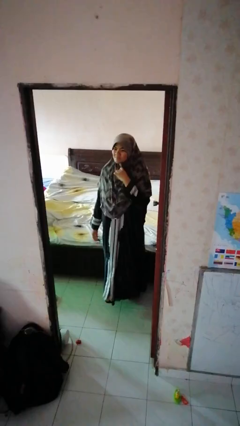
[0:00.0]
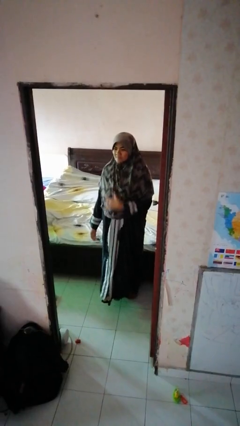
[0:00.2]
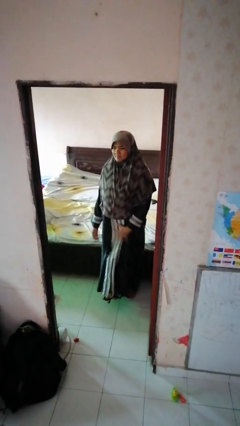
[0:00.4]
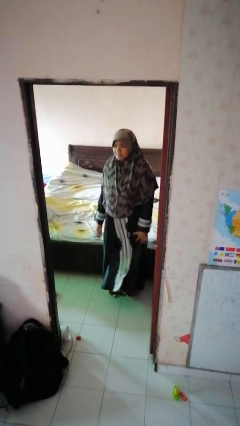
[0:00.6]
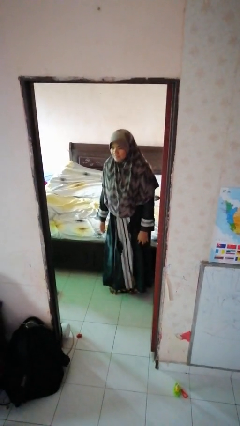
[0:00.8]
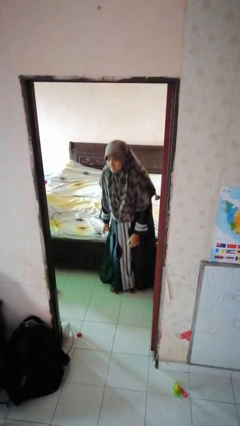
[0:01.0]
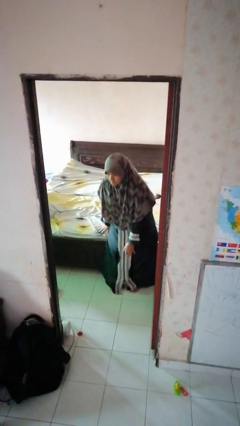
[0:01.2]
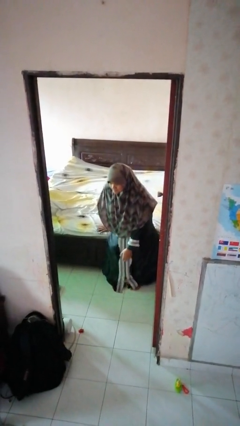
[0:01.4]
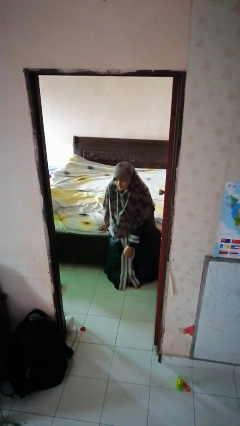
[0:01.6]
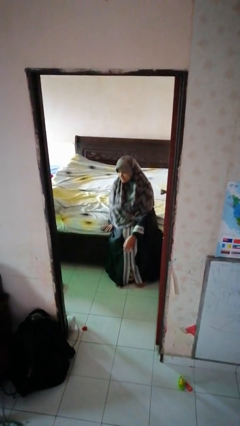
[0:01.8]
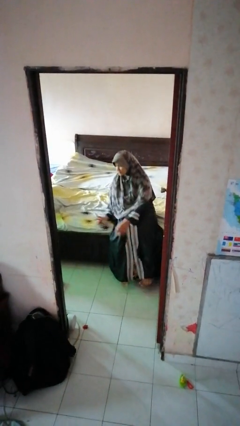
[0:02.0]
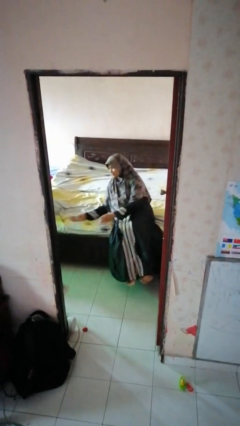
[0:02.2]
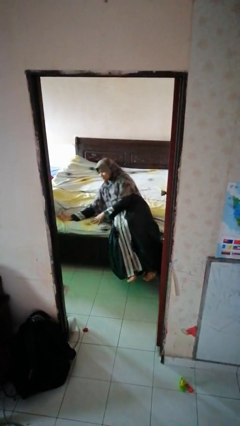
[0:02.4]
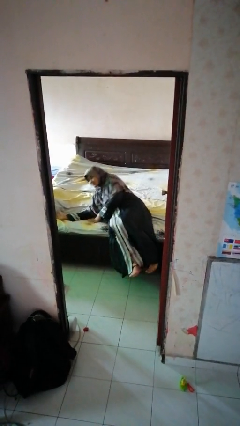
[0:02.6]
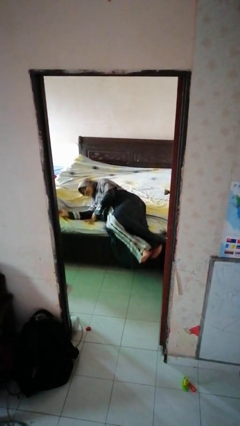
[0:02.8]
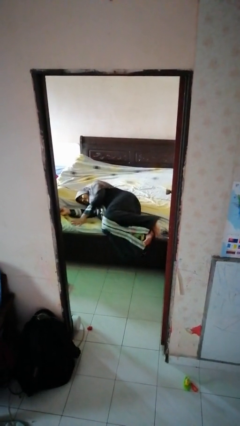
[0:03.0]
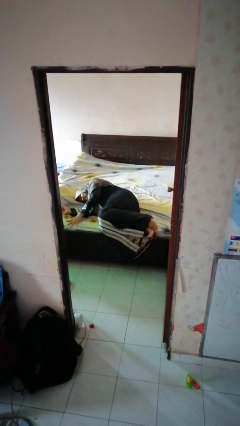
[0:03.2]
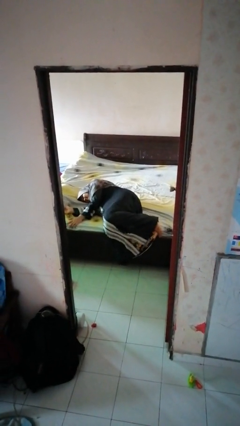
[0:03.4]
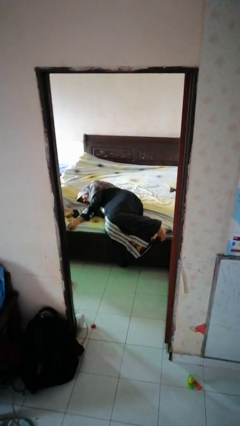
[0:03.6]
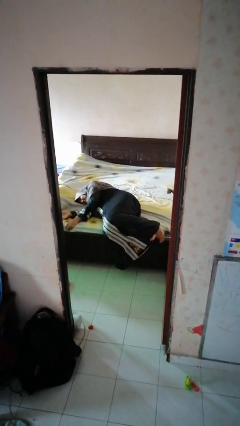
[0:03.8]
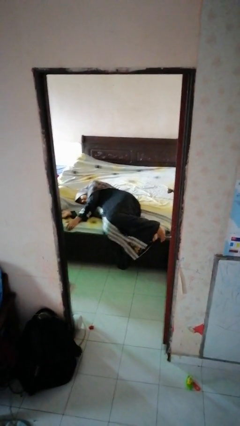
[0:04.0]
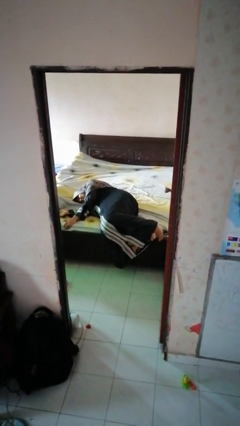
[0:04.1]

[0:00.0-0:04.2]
person lies down on bed

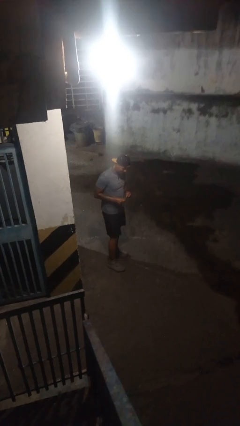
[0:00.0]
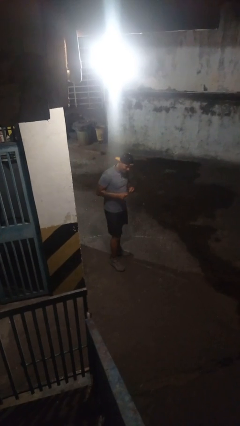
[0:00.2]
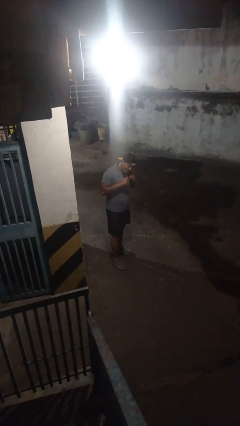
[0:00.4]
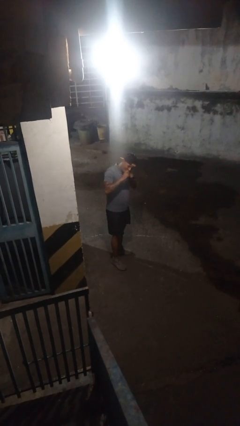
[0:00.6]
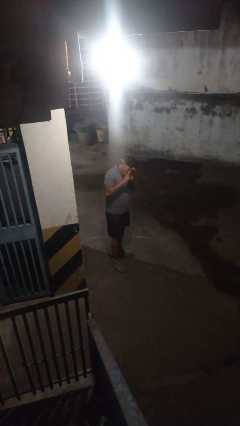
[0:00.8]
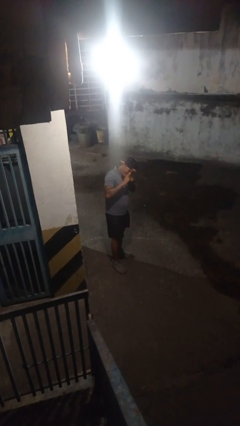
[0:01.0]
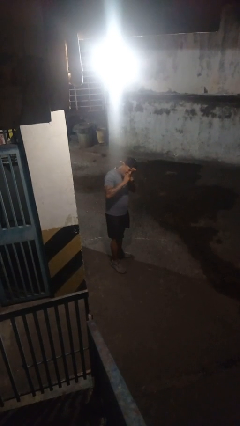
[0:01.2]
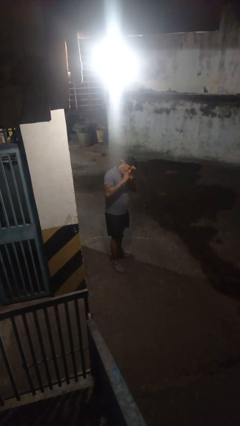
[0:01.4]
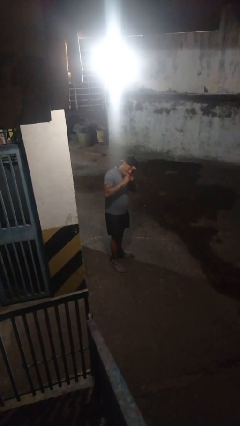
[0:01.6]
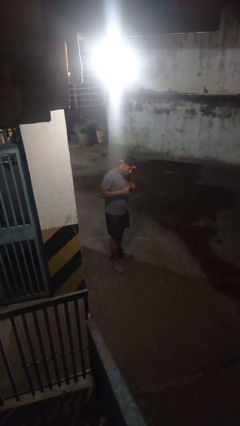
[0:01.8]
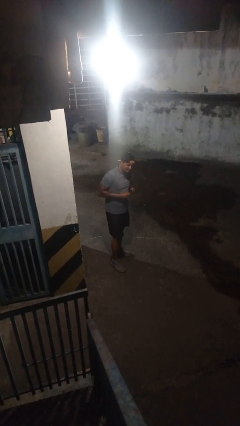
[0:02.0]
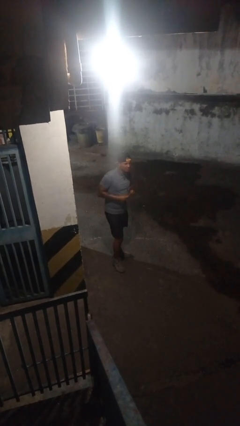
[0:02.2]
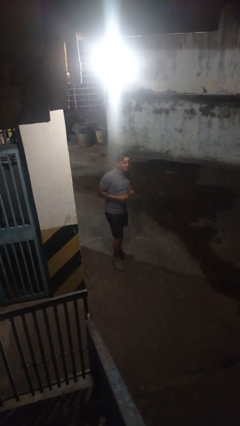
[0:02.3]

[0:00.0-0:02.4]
person flosses

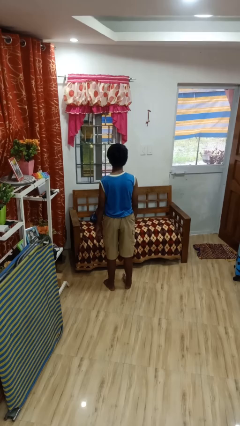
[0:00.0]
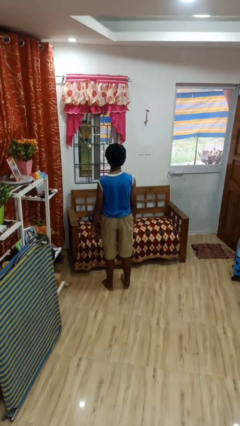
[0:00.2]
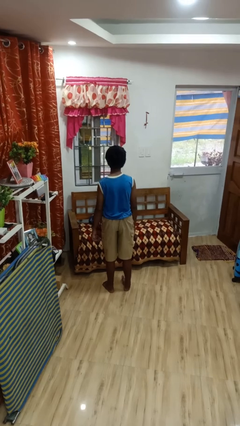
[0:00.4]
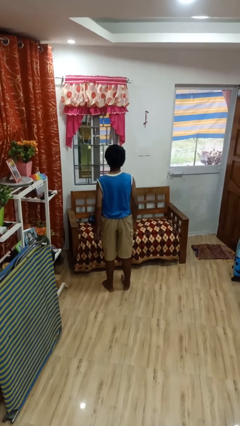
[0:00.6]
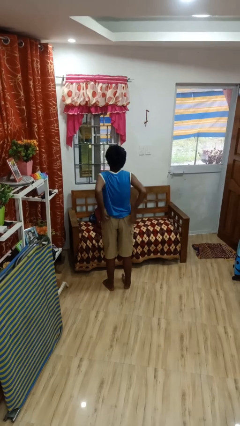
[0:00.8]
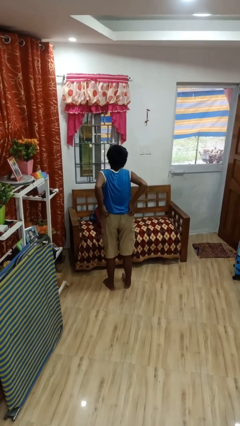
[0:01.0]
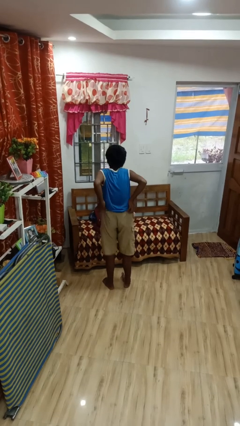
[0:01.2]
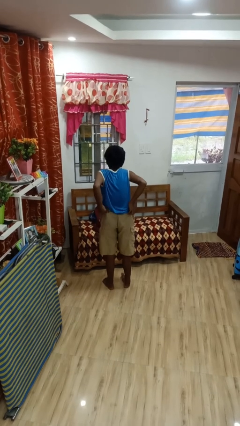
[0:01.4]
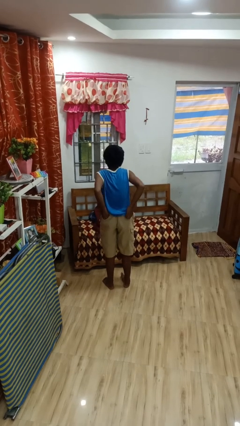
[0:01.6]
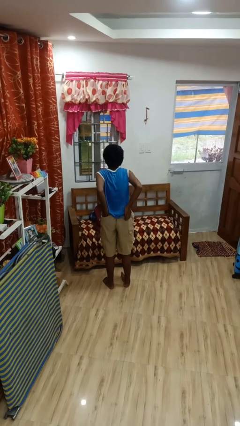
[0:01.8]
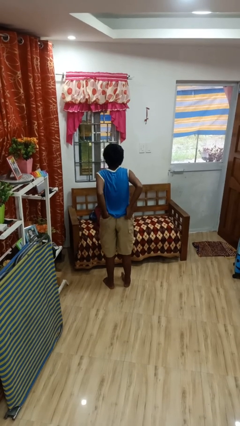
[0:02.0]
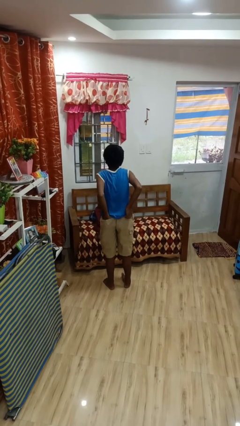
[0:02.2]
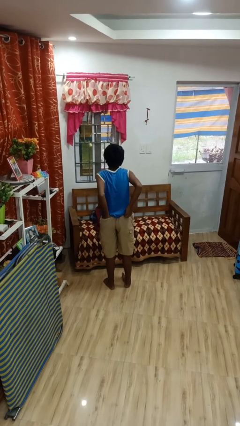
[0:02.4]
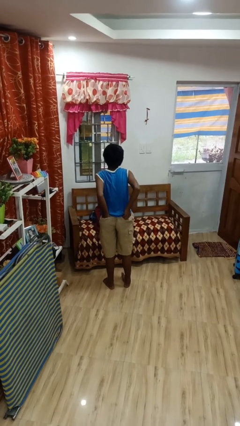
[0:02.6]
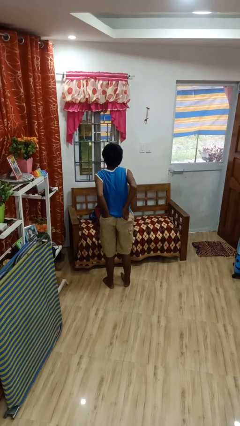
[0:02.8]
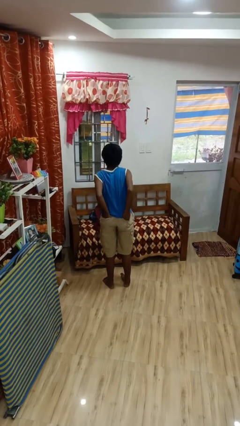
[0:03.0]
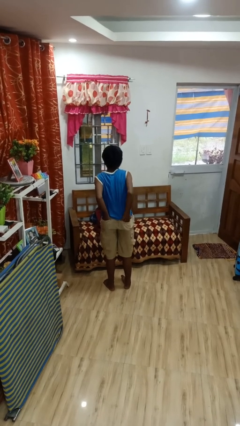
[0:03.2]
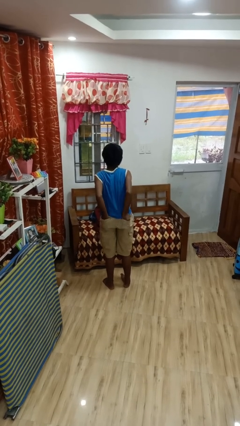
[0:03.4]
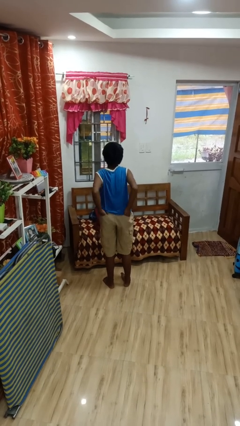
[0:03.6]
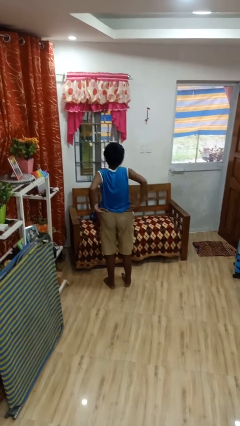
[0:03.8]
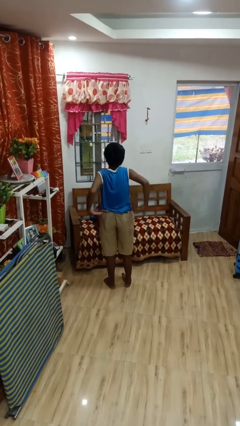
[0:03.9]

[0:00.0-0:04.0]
person puts hands in back pockets

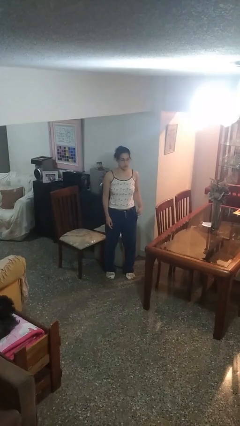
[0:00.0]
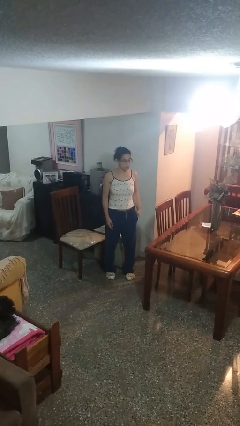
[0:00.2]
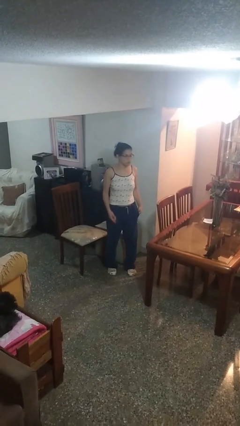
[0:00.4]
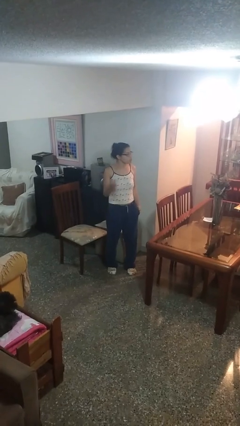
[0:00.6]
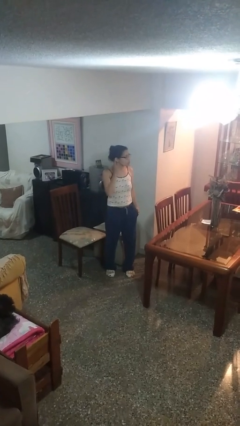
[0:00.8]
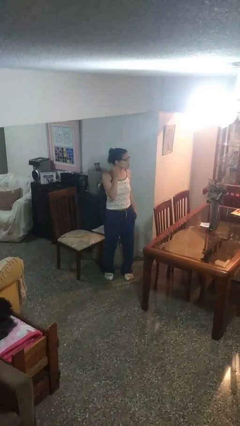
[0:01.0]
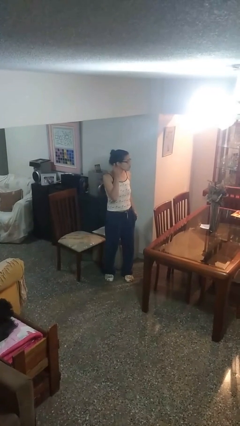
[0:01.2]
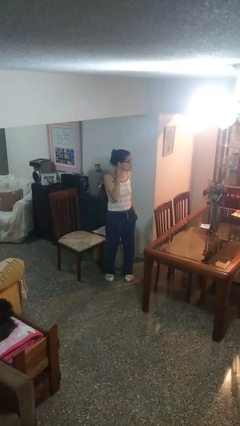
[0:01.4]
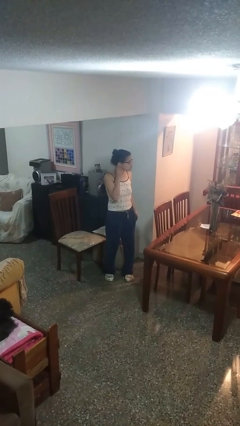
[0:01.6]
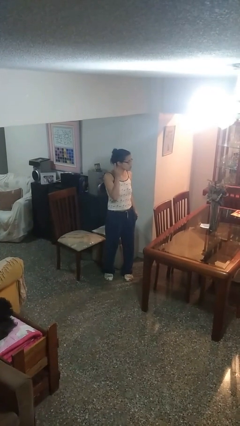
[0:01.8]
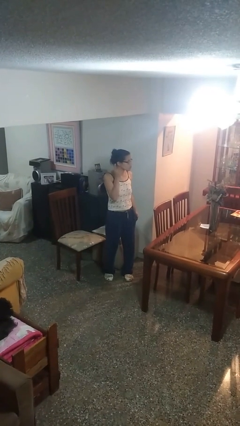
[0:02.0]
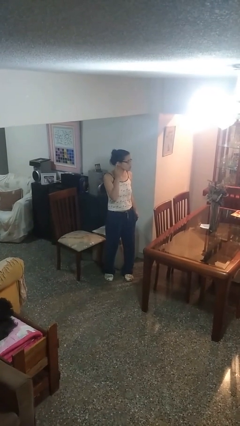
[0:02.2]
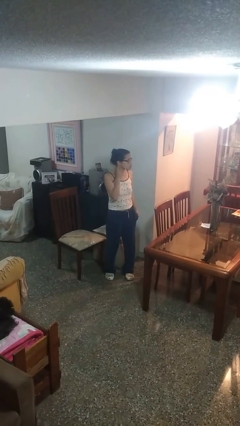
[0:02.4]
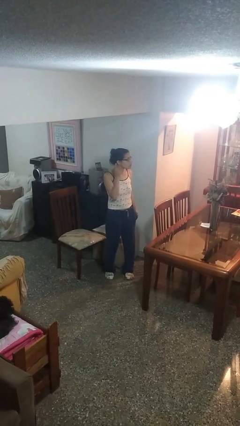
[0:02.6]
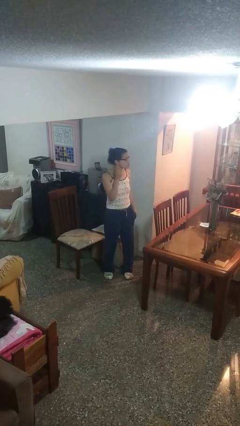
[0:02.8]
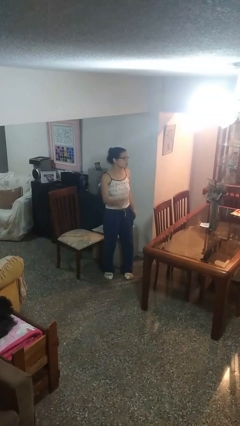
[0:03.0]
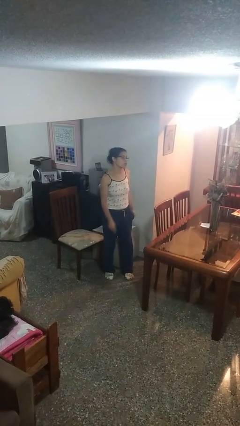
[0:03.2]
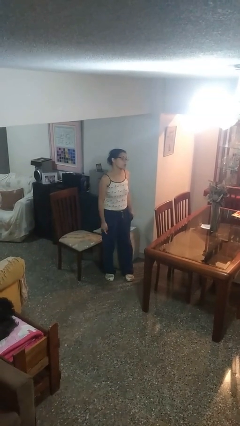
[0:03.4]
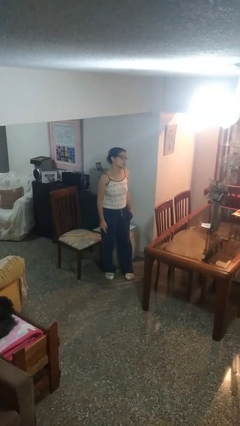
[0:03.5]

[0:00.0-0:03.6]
person gestures listen closely

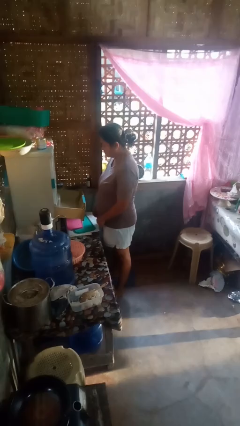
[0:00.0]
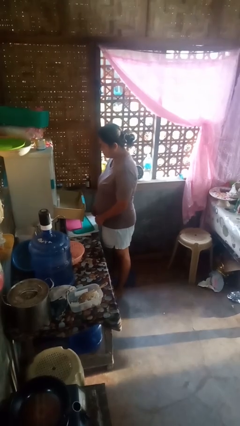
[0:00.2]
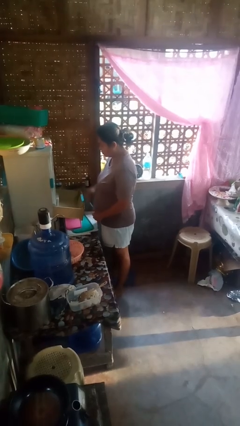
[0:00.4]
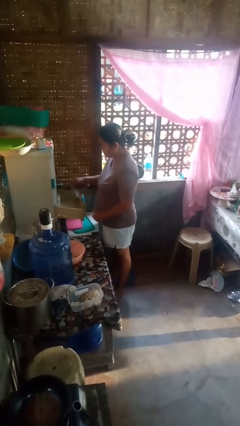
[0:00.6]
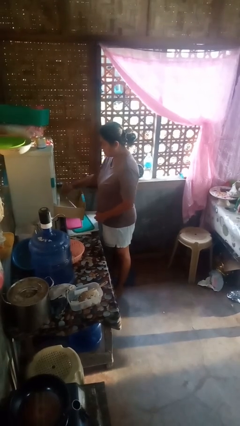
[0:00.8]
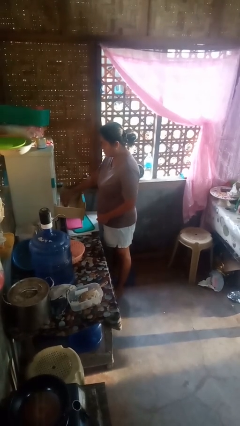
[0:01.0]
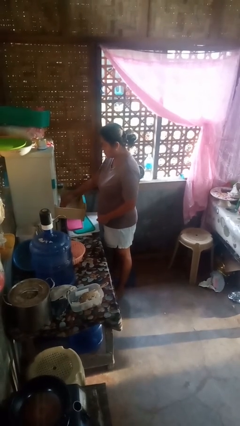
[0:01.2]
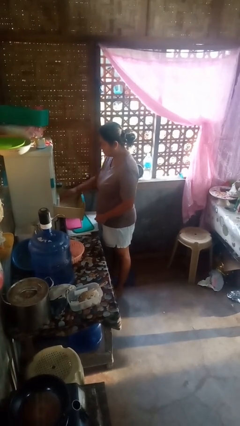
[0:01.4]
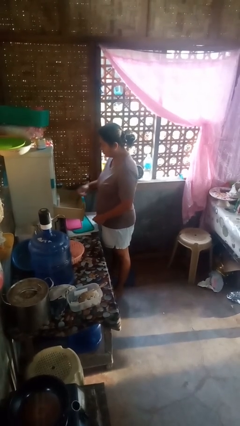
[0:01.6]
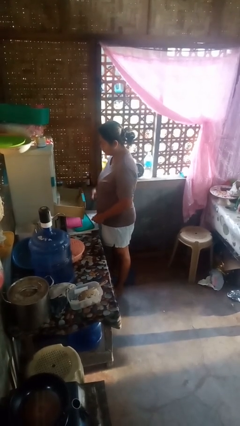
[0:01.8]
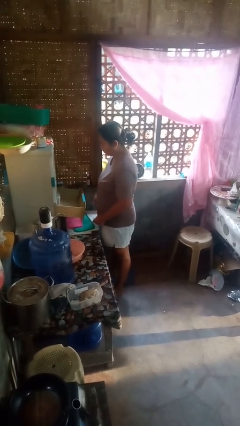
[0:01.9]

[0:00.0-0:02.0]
person puts object into kitchen drawer

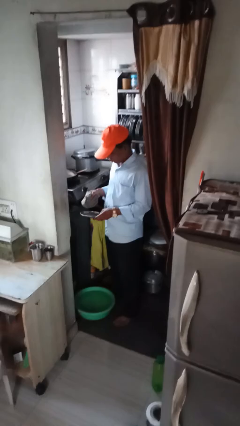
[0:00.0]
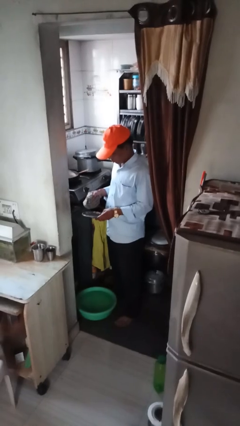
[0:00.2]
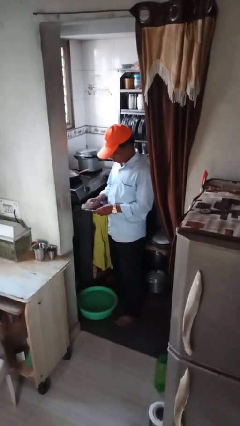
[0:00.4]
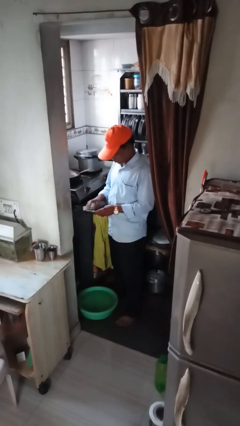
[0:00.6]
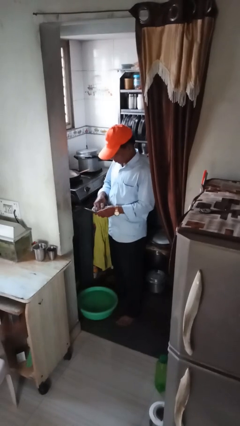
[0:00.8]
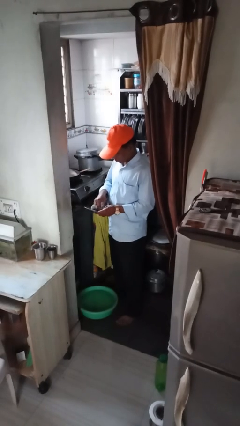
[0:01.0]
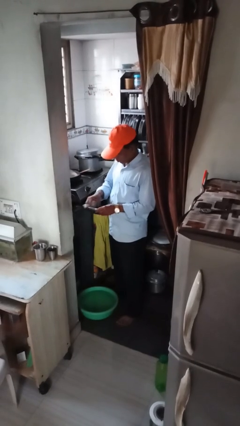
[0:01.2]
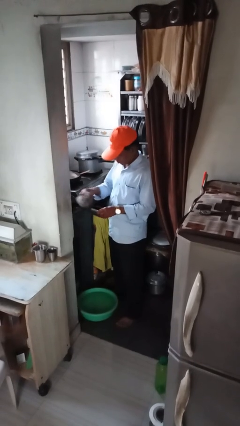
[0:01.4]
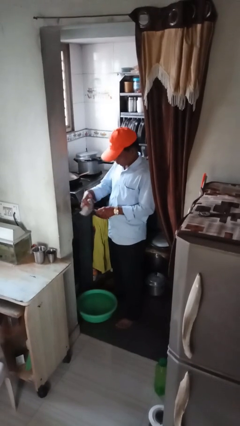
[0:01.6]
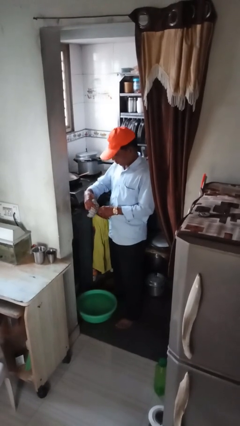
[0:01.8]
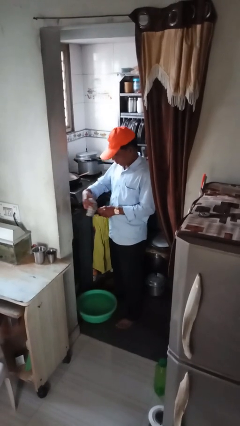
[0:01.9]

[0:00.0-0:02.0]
person dries dish
